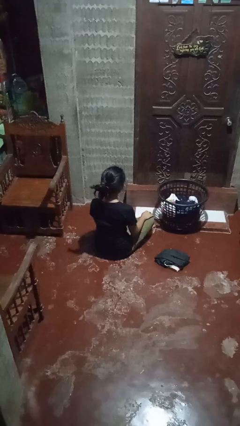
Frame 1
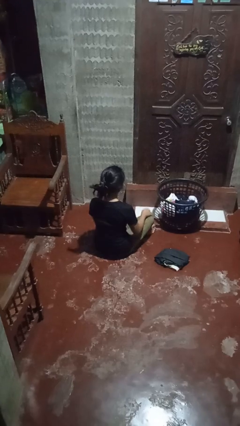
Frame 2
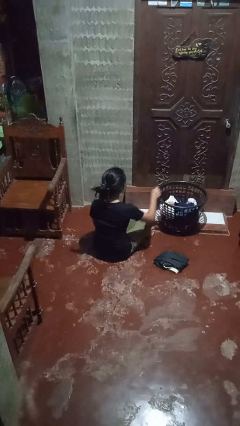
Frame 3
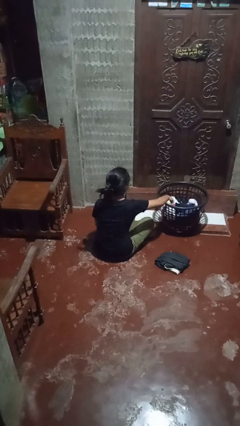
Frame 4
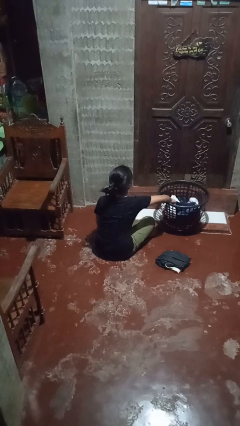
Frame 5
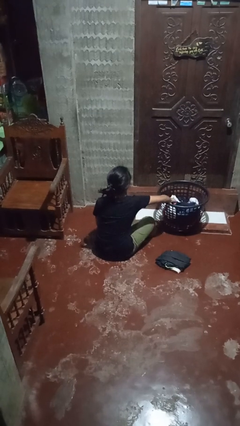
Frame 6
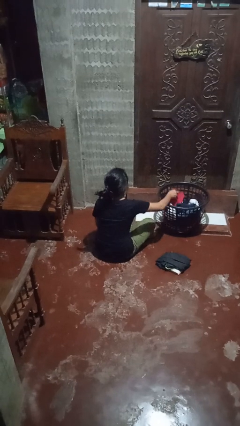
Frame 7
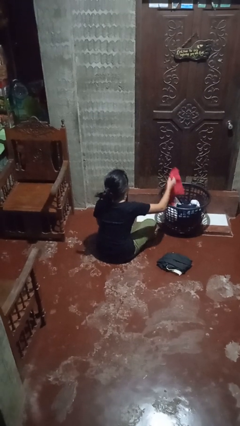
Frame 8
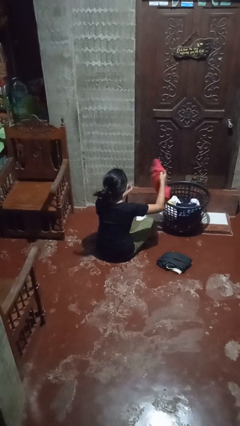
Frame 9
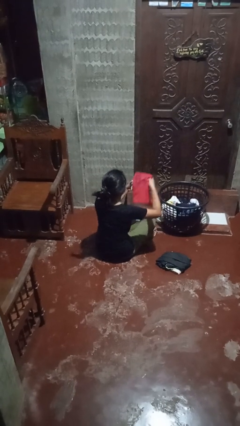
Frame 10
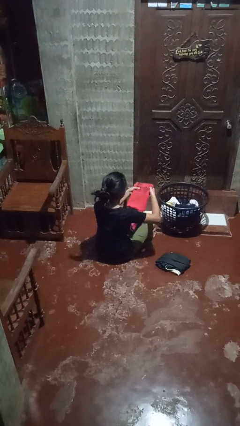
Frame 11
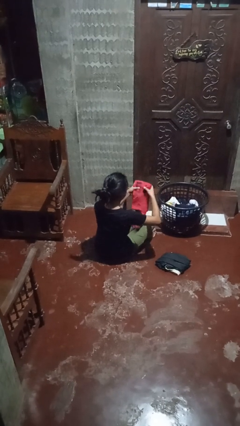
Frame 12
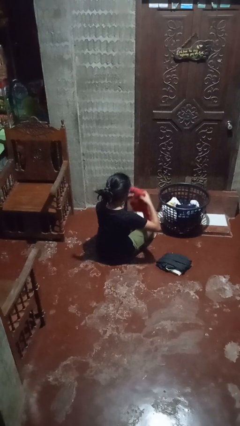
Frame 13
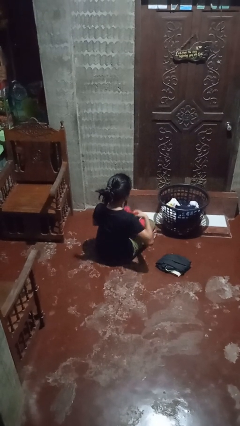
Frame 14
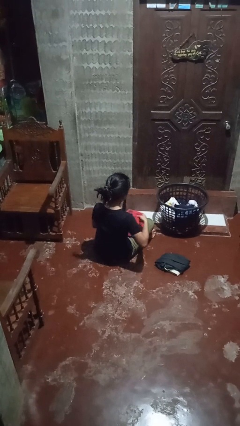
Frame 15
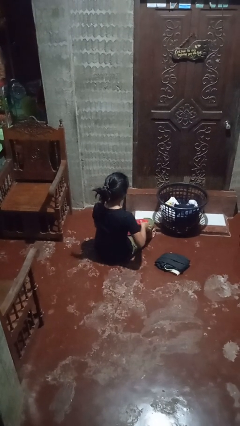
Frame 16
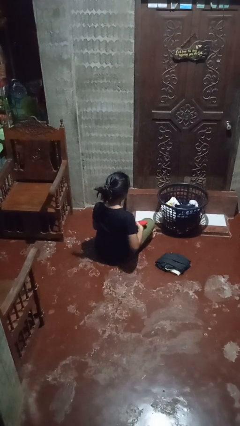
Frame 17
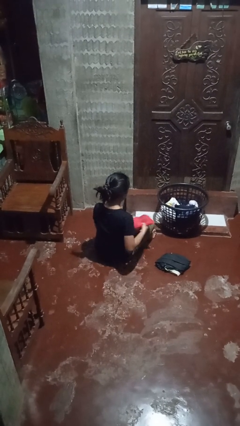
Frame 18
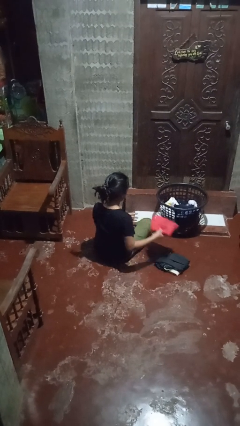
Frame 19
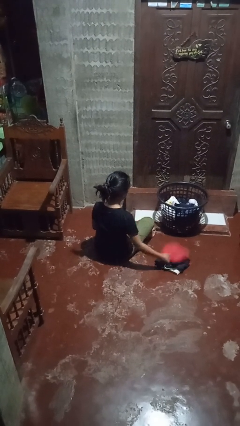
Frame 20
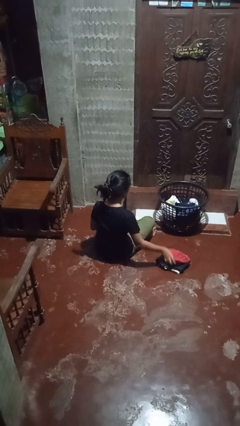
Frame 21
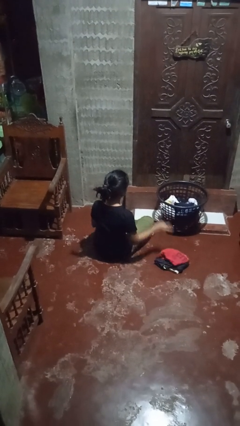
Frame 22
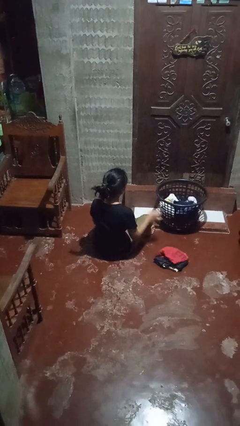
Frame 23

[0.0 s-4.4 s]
person folds shirt

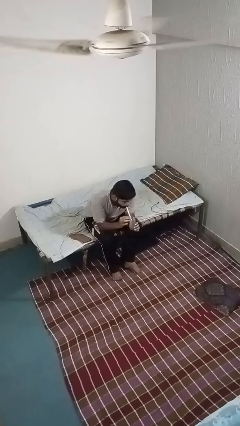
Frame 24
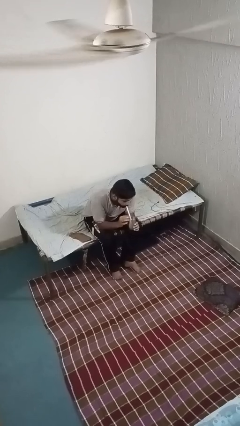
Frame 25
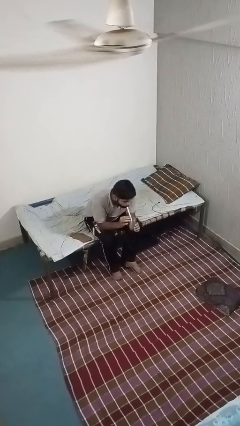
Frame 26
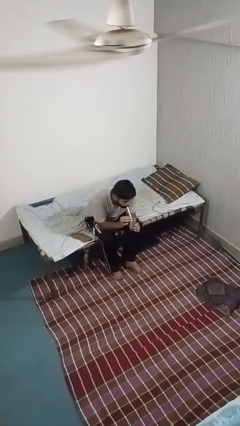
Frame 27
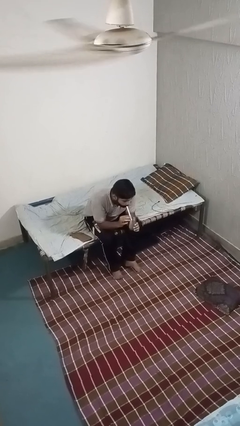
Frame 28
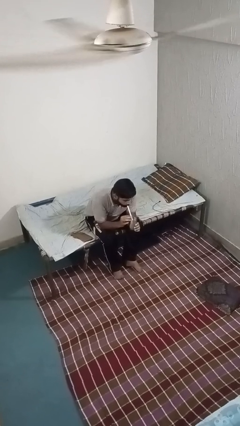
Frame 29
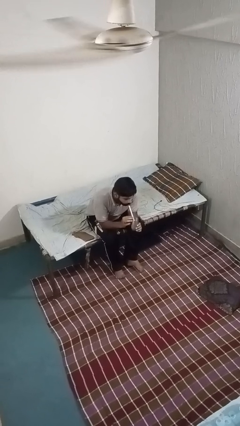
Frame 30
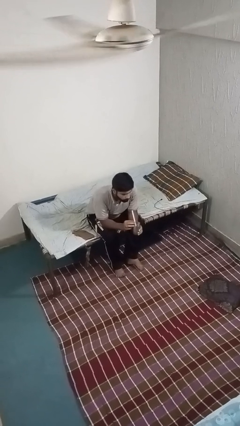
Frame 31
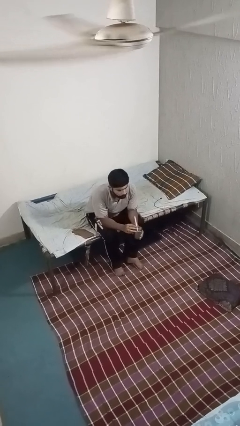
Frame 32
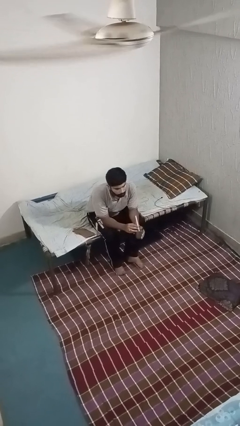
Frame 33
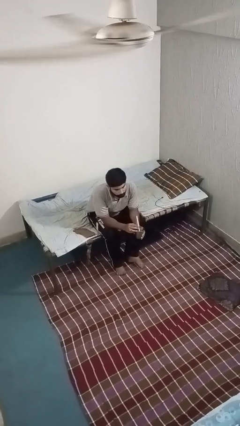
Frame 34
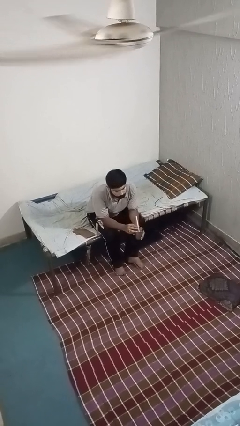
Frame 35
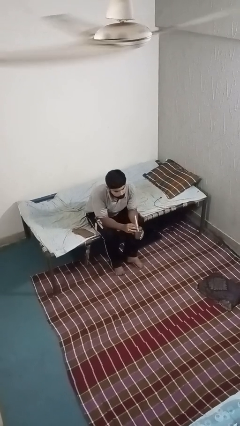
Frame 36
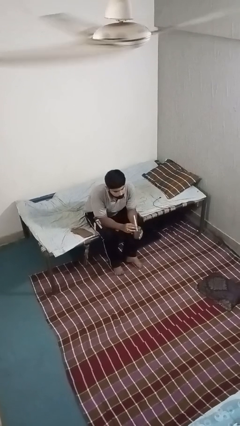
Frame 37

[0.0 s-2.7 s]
person drinks from straw

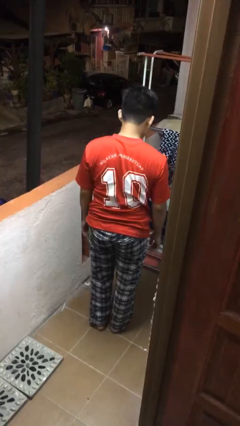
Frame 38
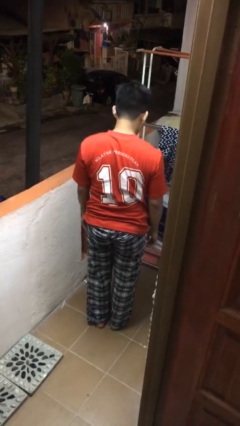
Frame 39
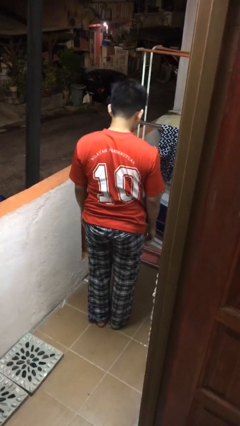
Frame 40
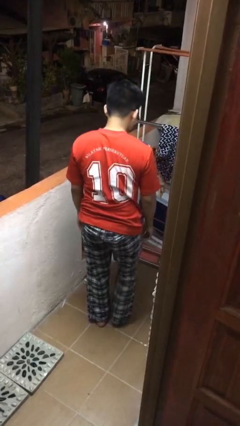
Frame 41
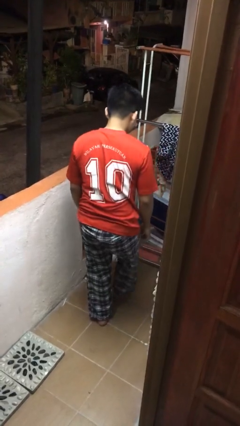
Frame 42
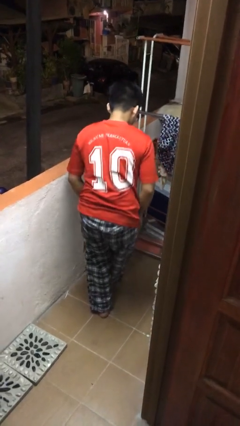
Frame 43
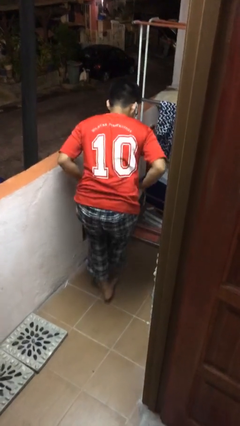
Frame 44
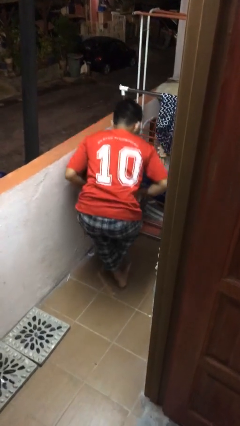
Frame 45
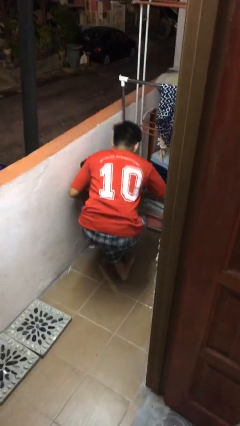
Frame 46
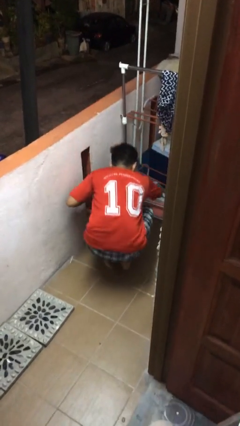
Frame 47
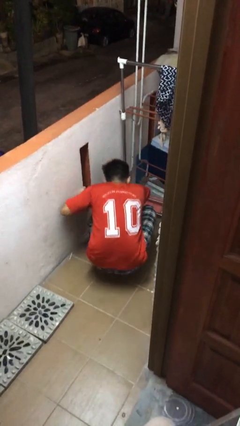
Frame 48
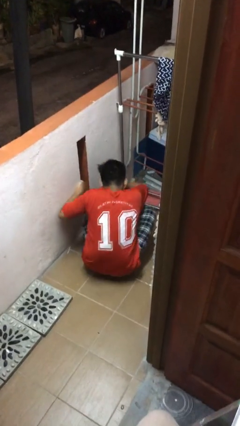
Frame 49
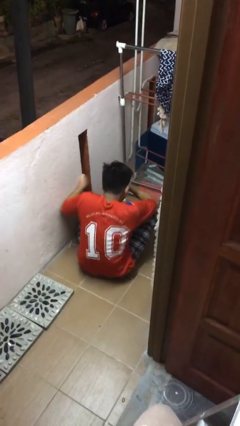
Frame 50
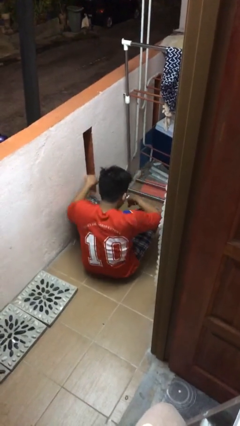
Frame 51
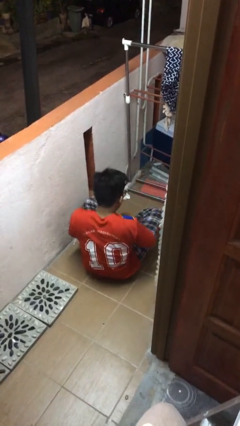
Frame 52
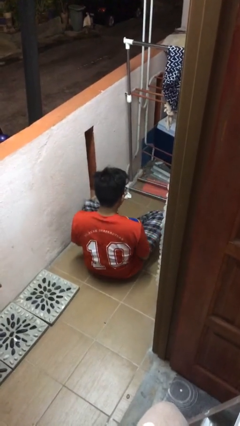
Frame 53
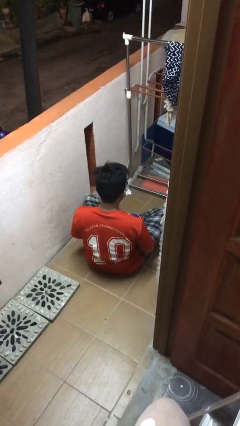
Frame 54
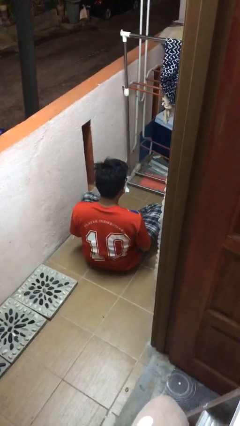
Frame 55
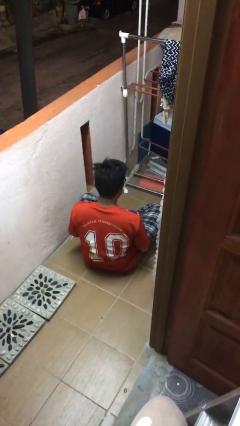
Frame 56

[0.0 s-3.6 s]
person sits crisscross

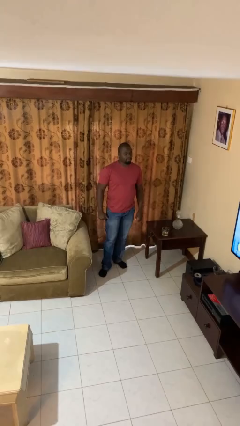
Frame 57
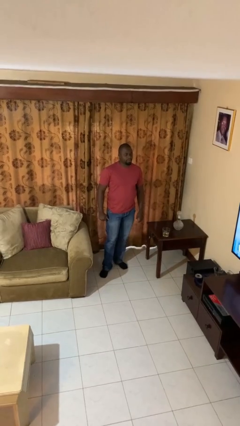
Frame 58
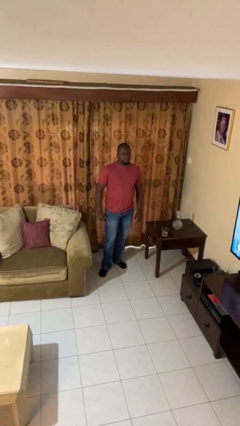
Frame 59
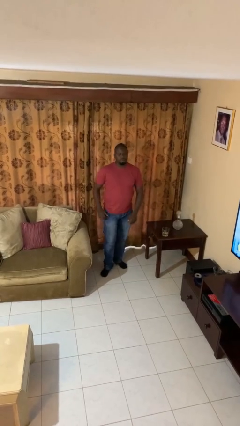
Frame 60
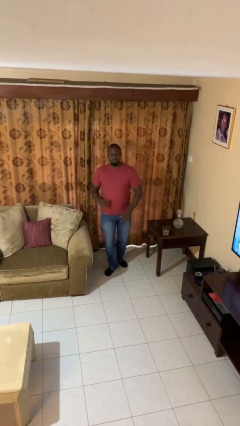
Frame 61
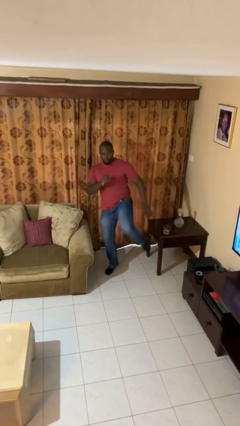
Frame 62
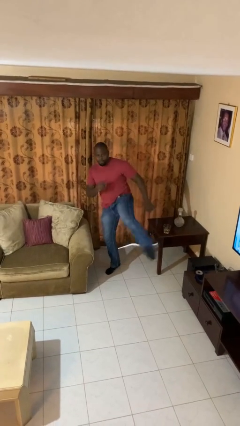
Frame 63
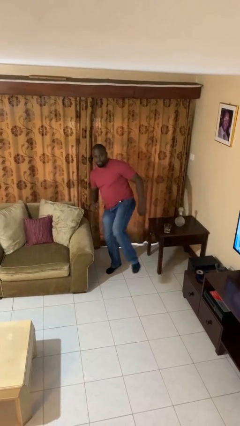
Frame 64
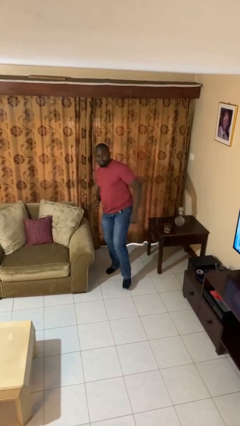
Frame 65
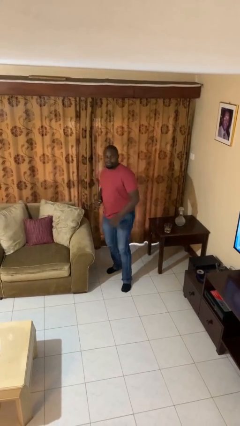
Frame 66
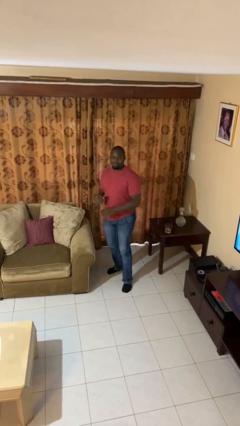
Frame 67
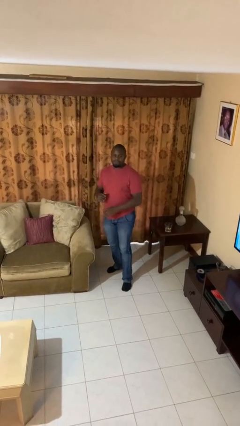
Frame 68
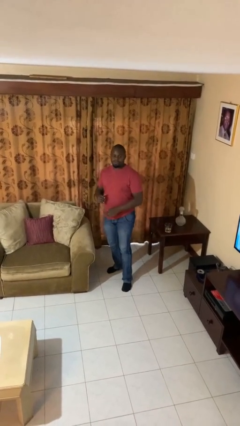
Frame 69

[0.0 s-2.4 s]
person karate kicks

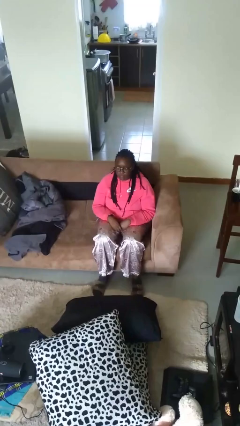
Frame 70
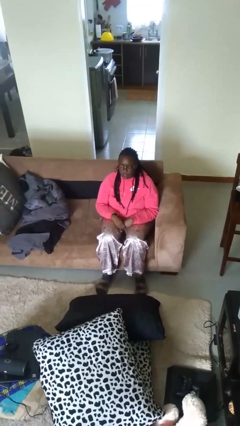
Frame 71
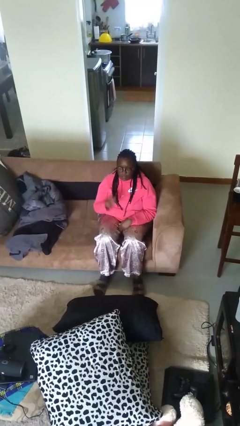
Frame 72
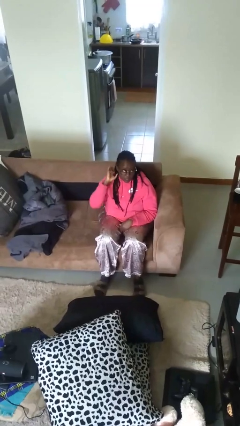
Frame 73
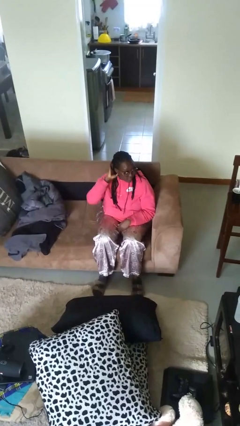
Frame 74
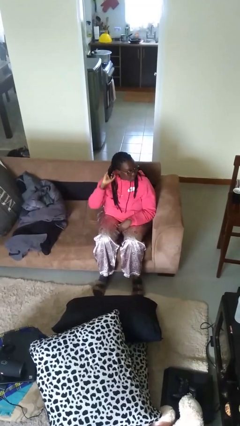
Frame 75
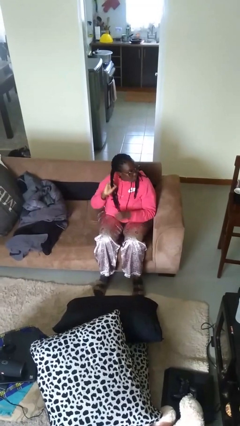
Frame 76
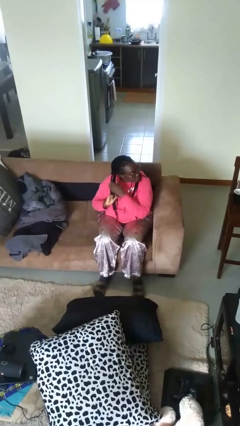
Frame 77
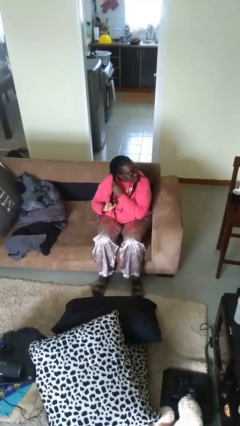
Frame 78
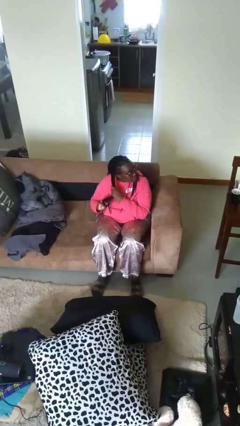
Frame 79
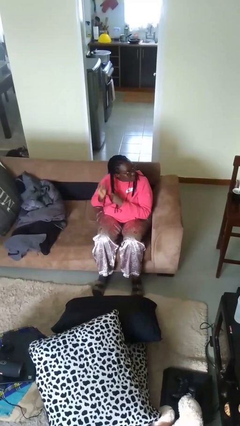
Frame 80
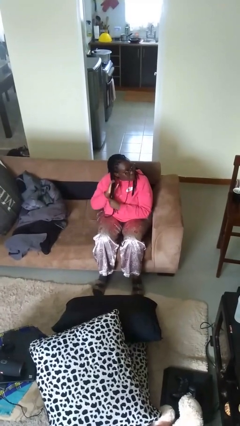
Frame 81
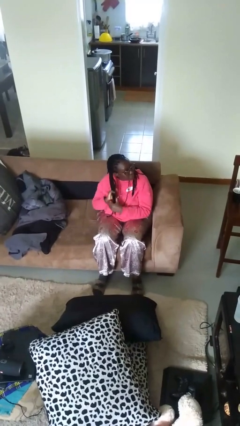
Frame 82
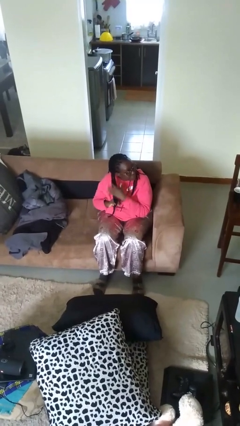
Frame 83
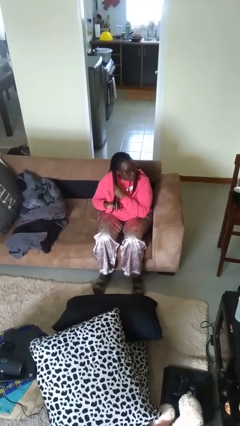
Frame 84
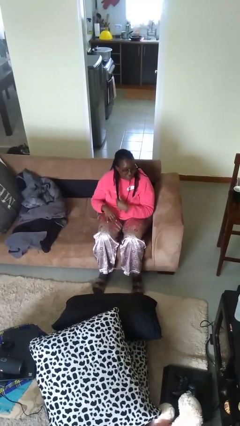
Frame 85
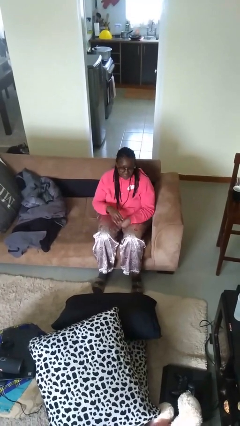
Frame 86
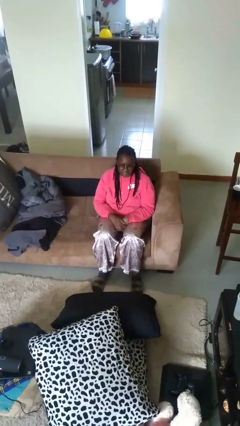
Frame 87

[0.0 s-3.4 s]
person strokes hair

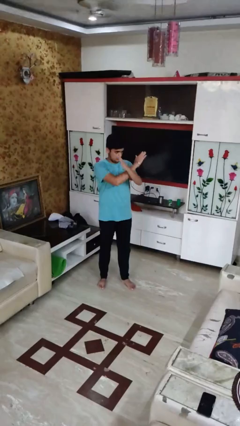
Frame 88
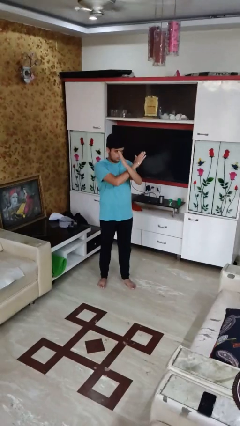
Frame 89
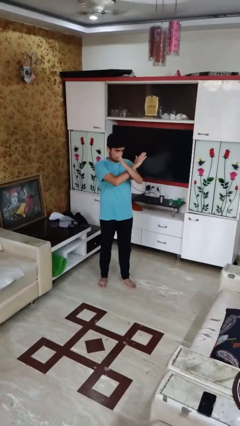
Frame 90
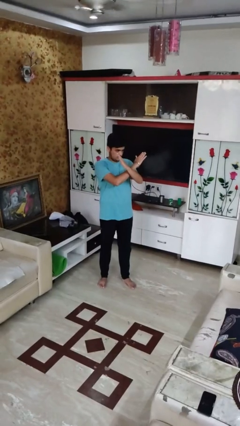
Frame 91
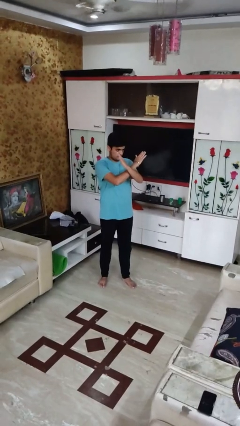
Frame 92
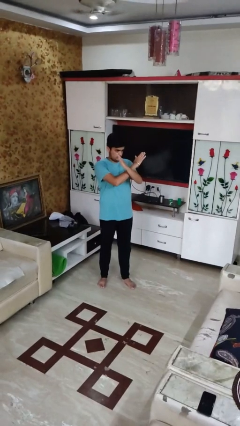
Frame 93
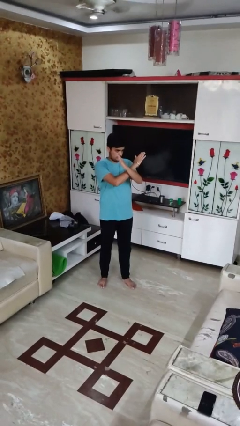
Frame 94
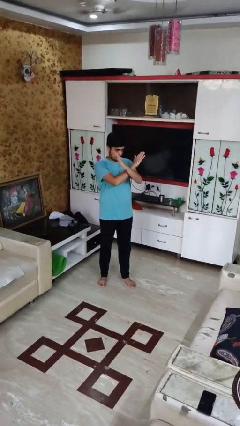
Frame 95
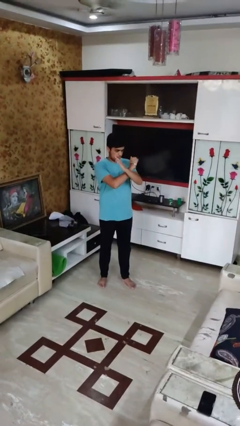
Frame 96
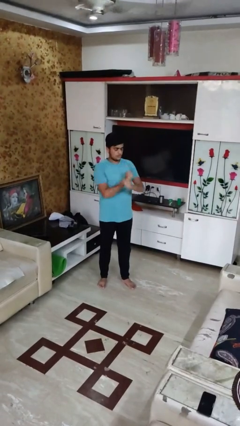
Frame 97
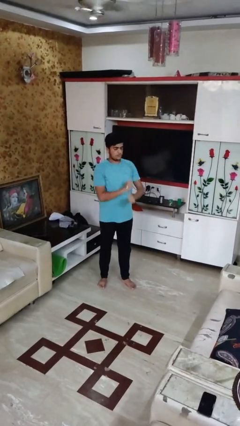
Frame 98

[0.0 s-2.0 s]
person gestures arms x
